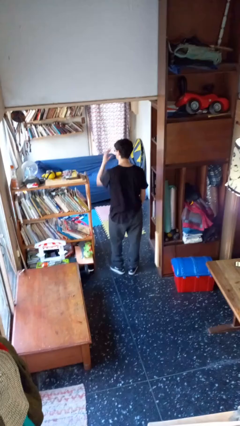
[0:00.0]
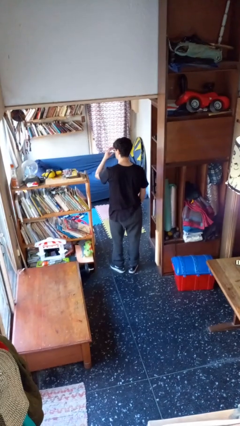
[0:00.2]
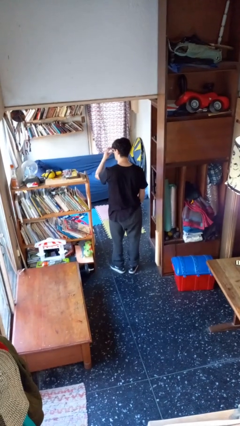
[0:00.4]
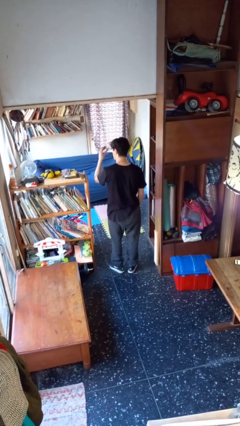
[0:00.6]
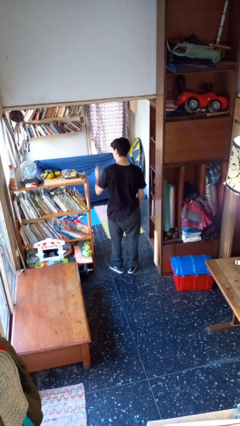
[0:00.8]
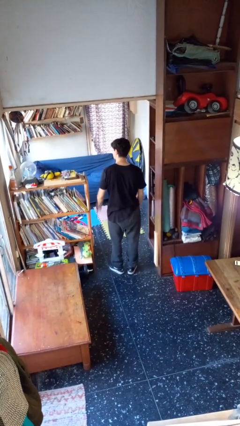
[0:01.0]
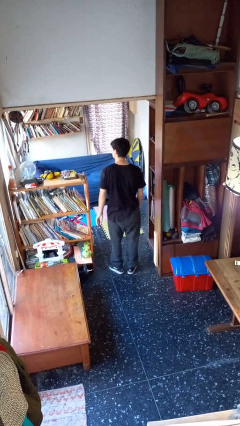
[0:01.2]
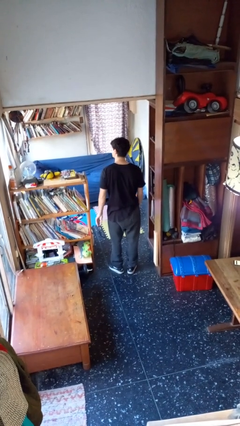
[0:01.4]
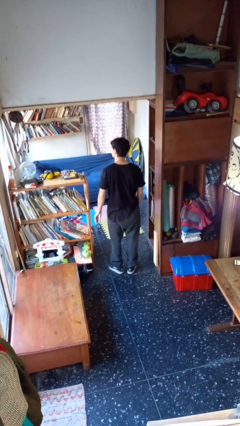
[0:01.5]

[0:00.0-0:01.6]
person takes off glasses

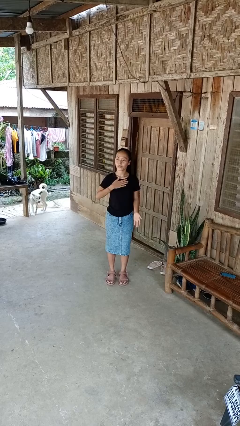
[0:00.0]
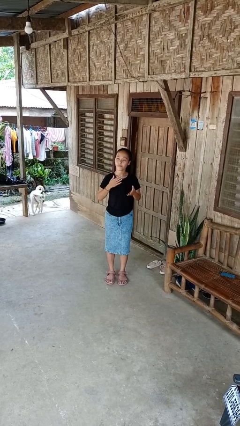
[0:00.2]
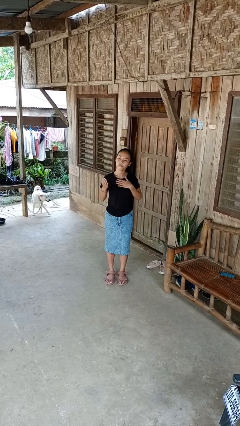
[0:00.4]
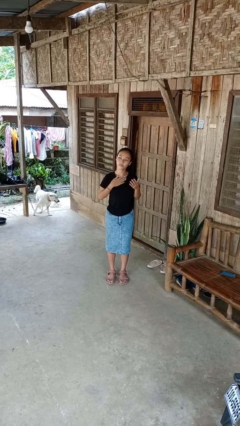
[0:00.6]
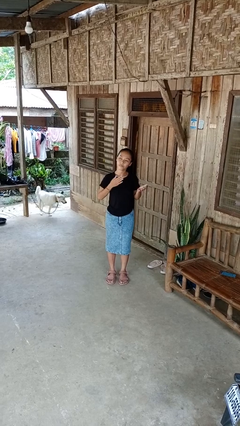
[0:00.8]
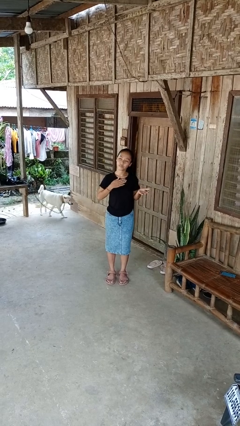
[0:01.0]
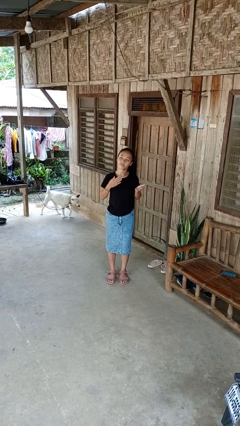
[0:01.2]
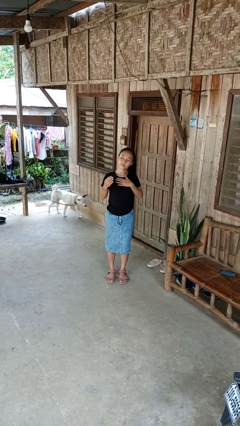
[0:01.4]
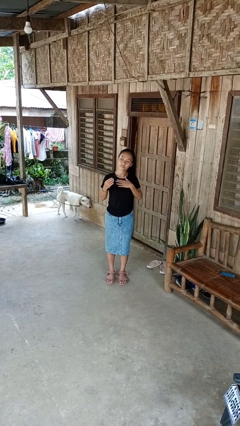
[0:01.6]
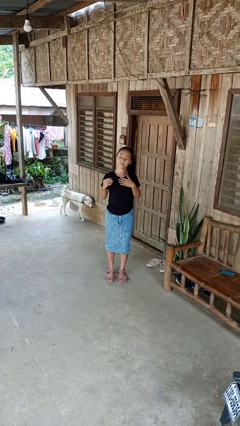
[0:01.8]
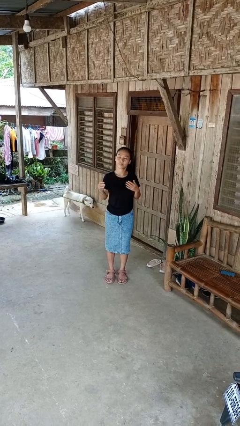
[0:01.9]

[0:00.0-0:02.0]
person drums on chest

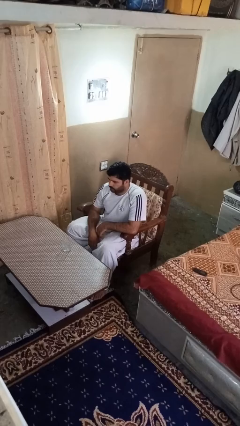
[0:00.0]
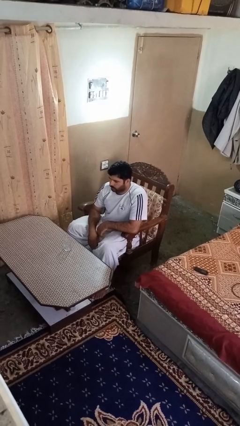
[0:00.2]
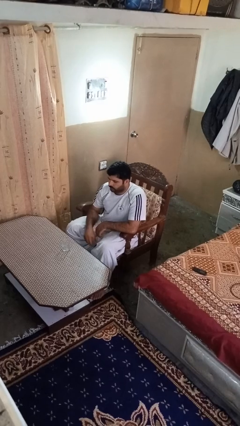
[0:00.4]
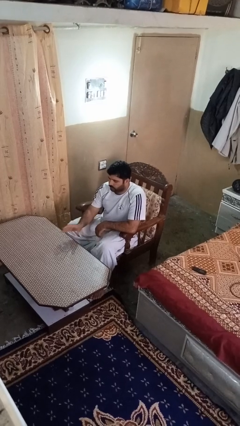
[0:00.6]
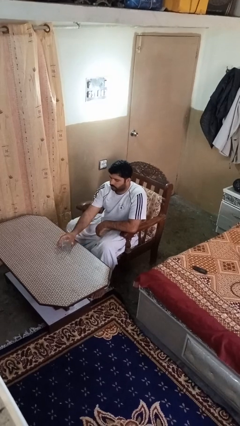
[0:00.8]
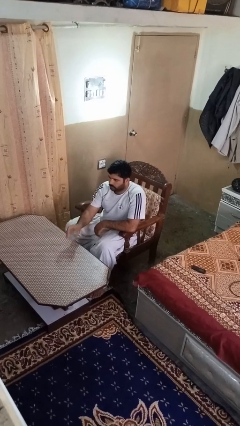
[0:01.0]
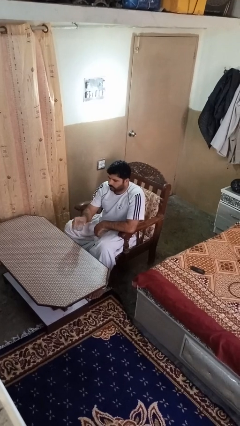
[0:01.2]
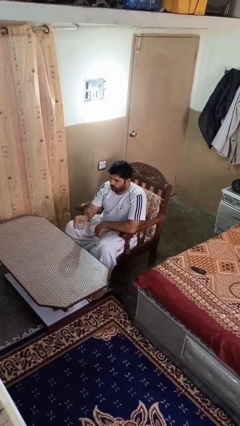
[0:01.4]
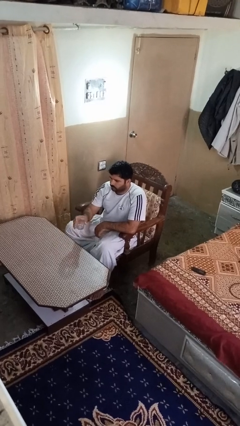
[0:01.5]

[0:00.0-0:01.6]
person picks up object from table

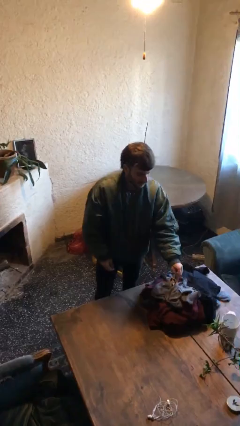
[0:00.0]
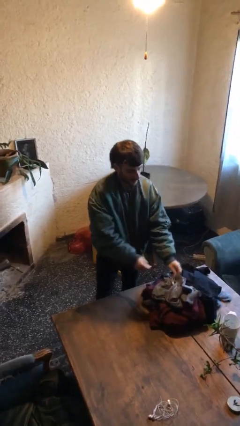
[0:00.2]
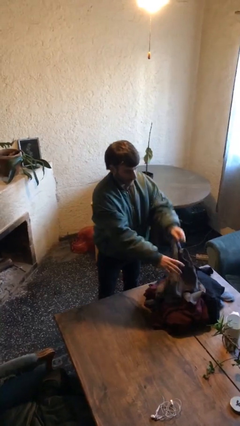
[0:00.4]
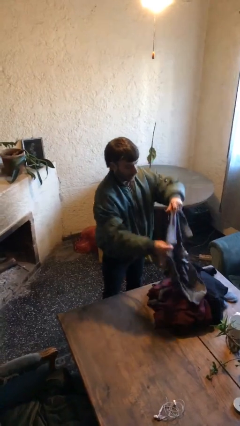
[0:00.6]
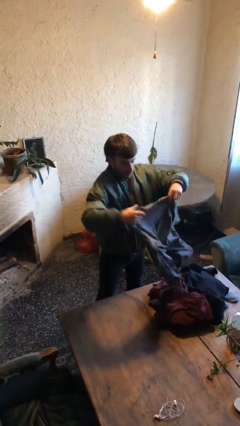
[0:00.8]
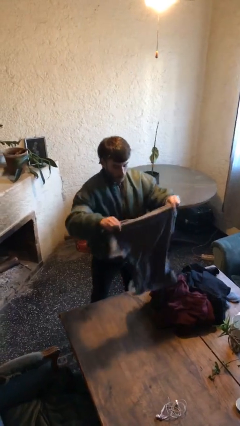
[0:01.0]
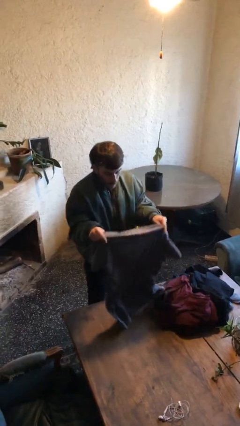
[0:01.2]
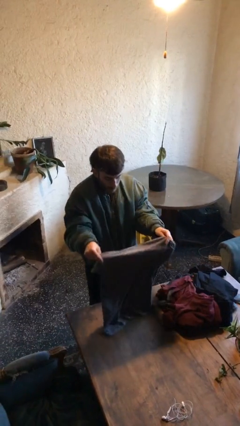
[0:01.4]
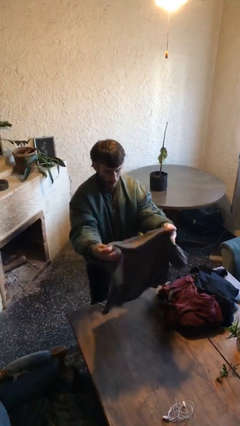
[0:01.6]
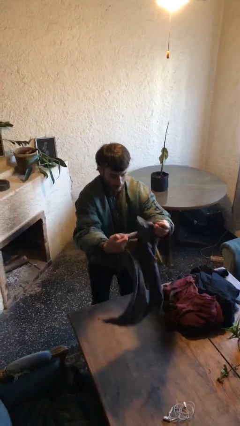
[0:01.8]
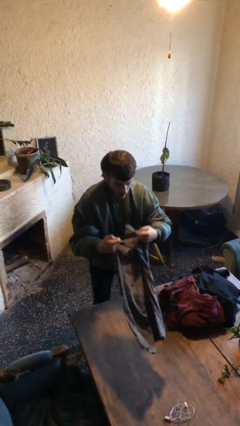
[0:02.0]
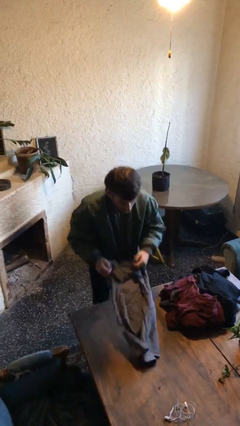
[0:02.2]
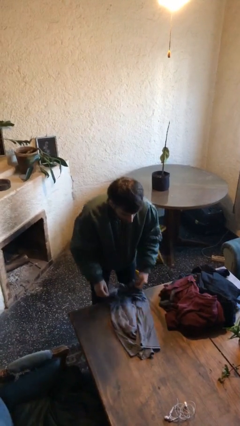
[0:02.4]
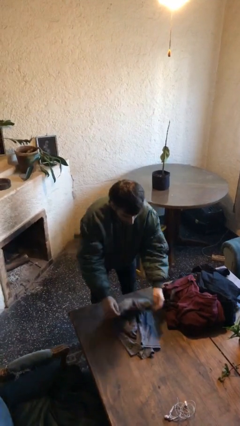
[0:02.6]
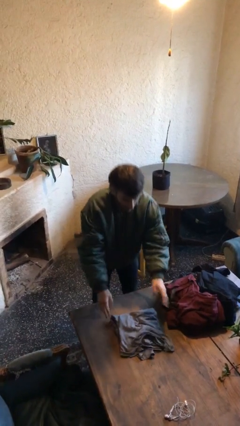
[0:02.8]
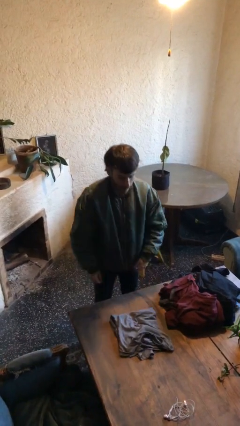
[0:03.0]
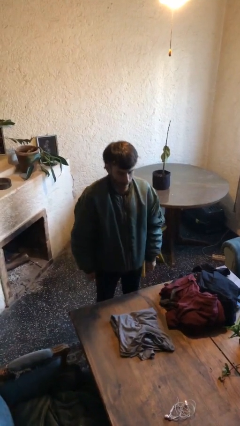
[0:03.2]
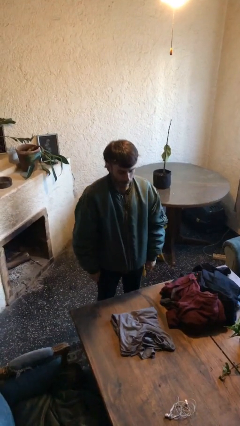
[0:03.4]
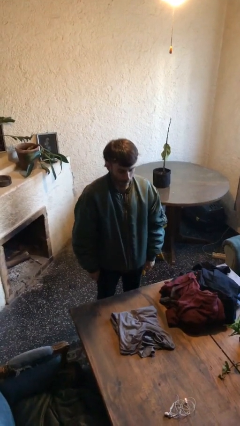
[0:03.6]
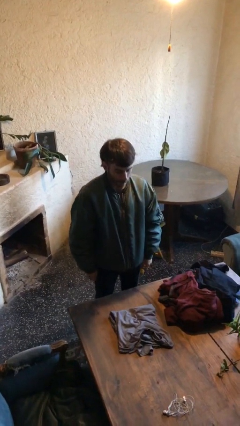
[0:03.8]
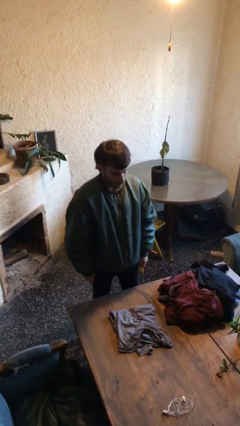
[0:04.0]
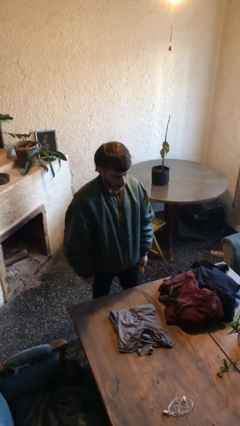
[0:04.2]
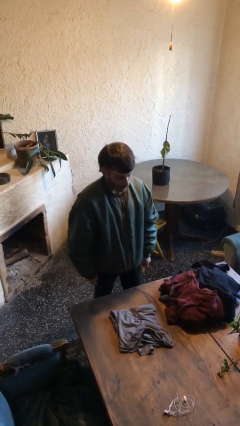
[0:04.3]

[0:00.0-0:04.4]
person folds shirt

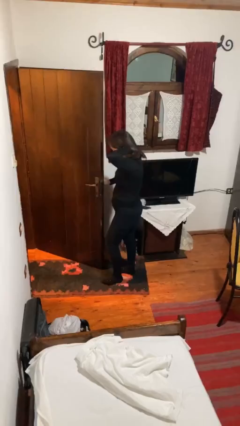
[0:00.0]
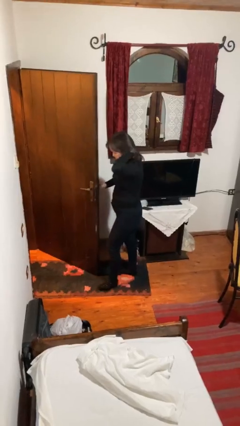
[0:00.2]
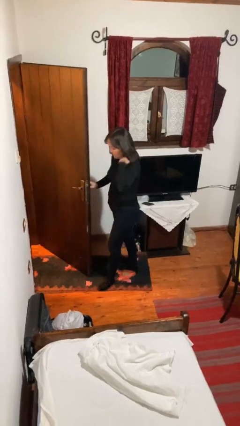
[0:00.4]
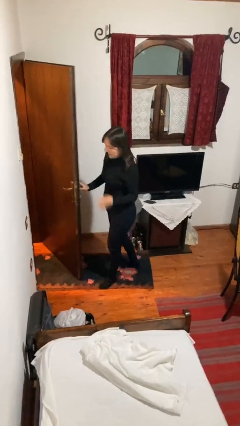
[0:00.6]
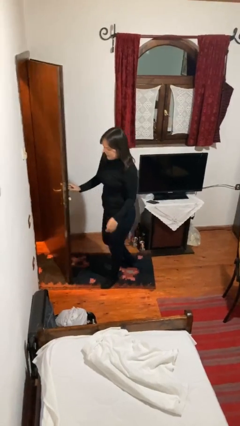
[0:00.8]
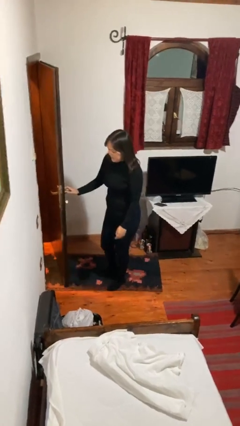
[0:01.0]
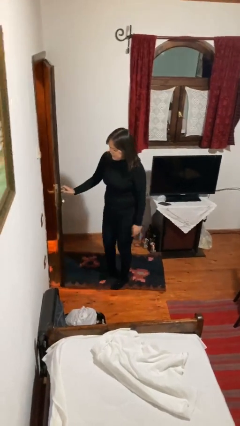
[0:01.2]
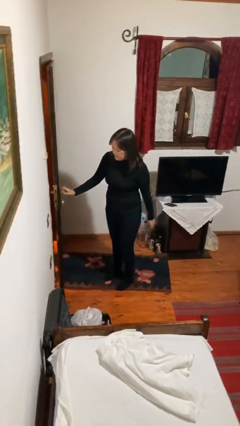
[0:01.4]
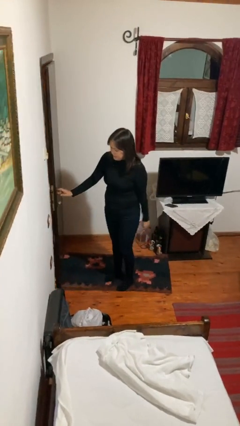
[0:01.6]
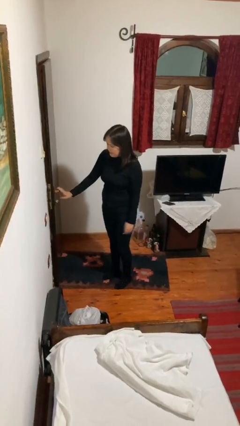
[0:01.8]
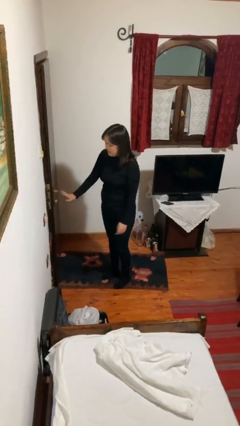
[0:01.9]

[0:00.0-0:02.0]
person closes facility door

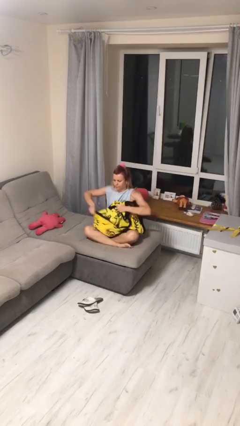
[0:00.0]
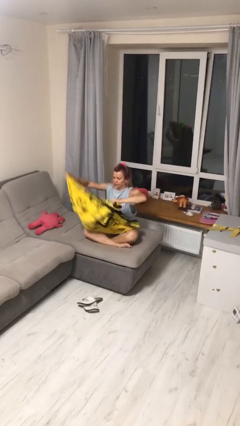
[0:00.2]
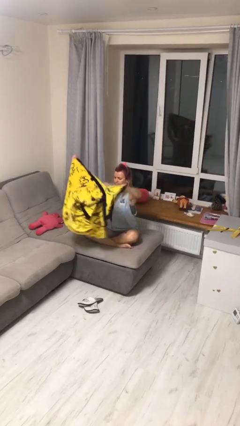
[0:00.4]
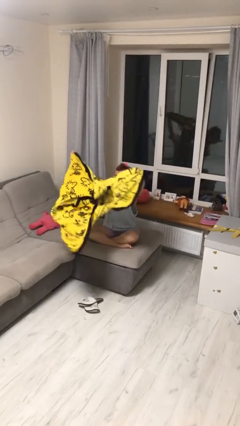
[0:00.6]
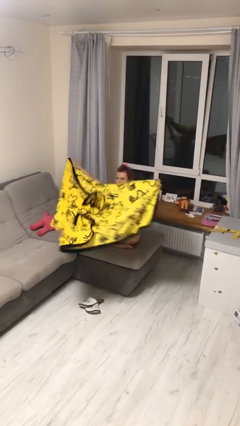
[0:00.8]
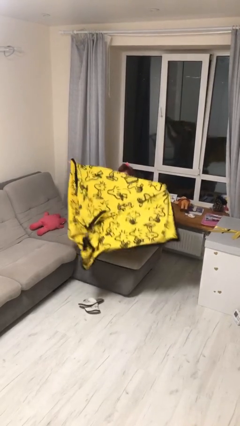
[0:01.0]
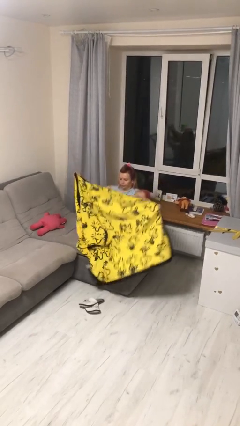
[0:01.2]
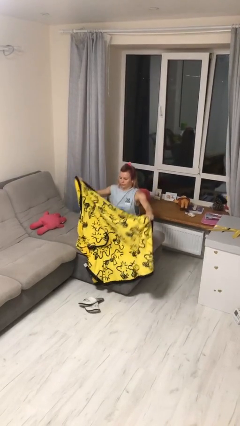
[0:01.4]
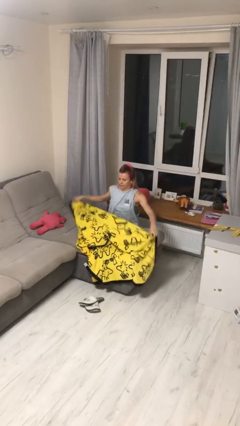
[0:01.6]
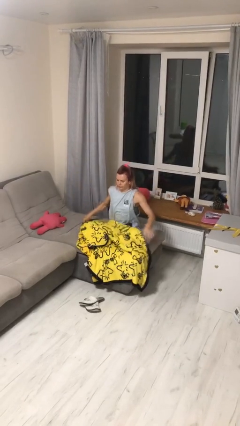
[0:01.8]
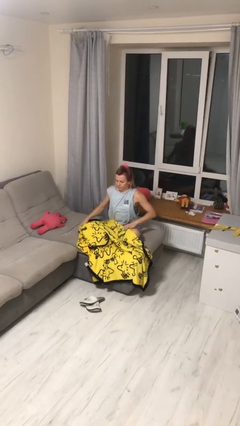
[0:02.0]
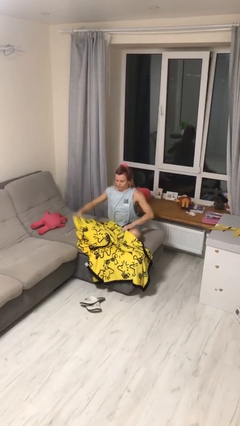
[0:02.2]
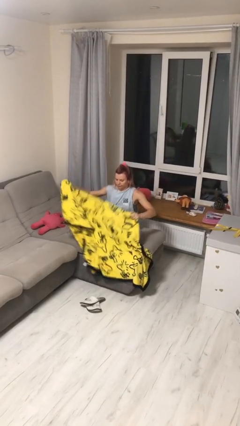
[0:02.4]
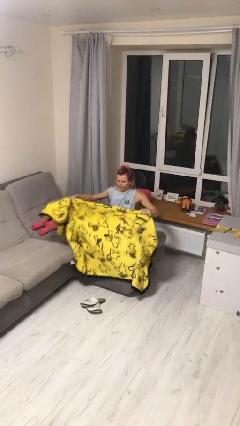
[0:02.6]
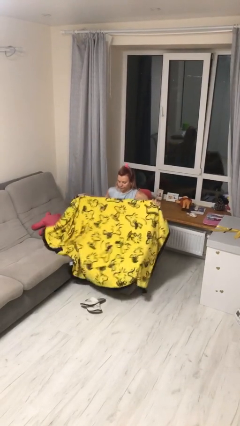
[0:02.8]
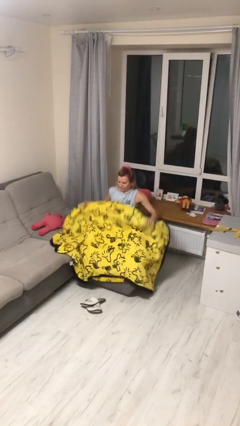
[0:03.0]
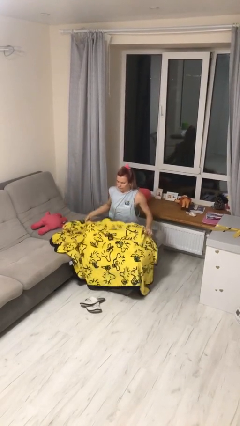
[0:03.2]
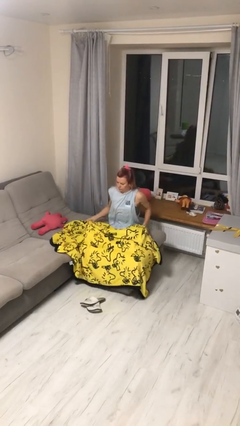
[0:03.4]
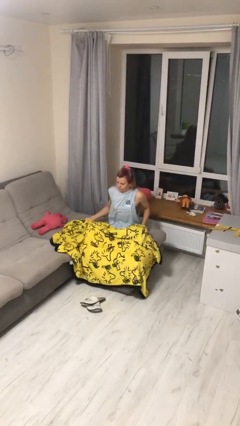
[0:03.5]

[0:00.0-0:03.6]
person unfolds blanket

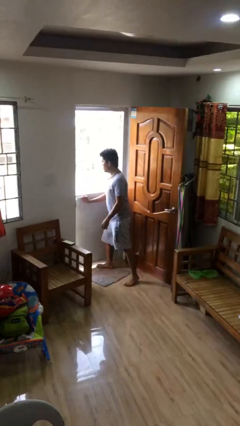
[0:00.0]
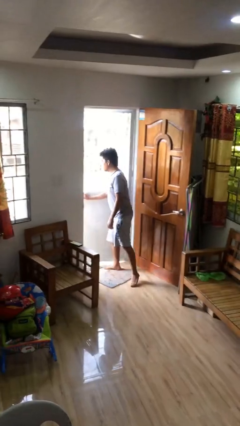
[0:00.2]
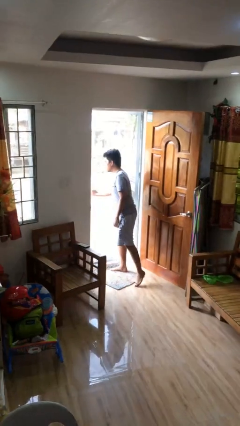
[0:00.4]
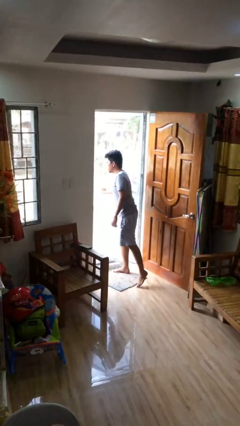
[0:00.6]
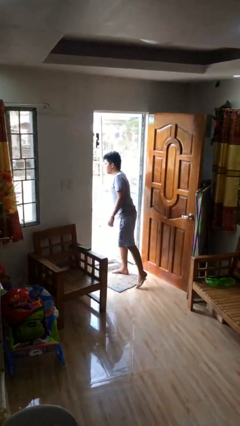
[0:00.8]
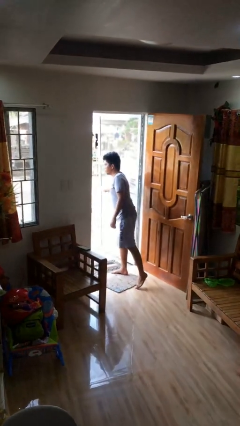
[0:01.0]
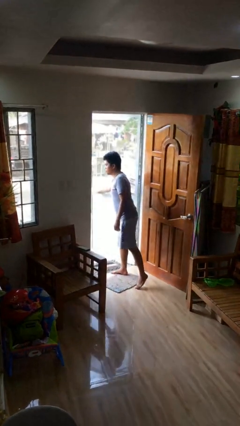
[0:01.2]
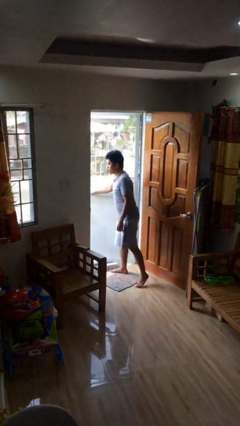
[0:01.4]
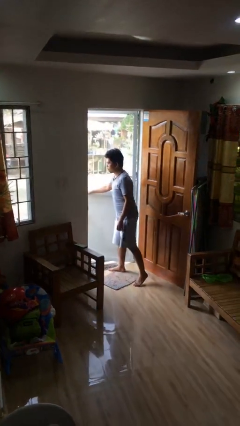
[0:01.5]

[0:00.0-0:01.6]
person opens facility door
